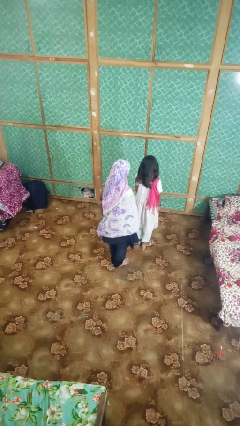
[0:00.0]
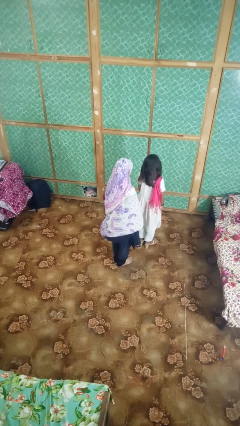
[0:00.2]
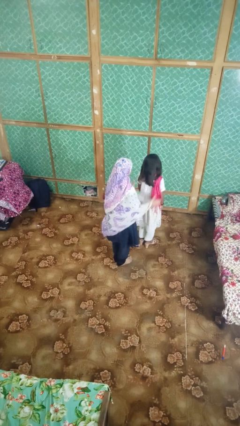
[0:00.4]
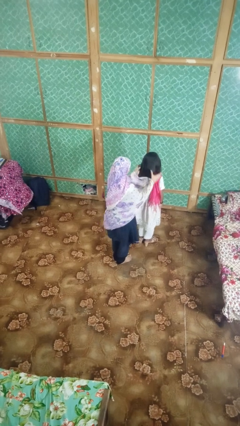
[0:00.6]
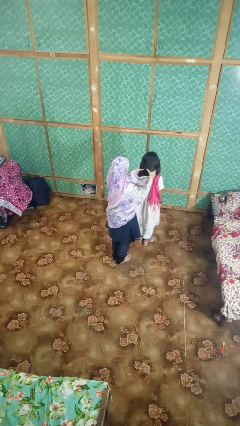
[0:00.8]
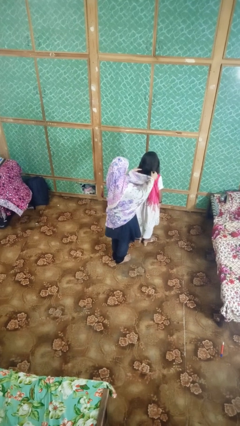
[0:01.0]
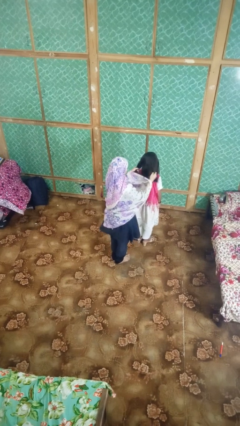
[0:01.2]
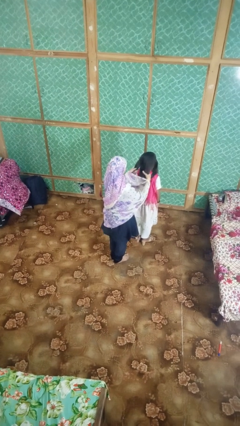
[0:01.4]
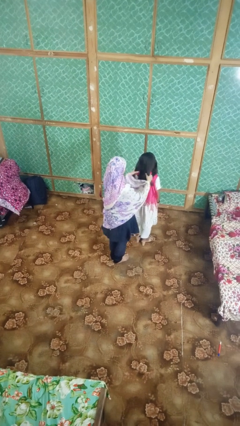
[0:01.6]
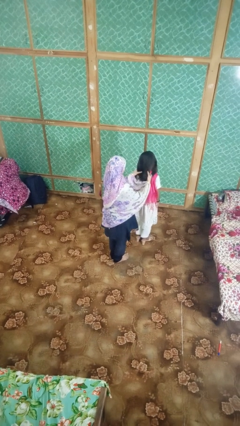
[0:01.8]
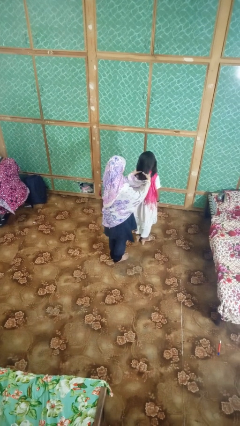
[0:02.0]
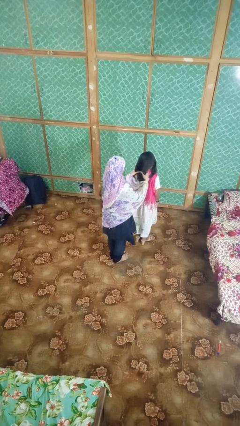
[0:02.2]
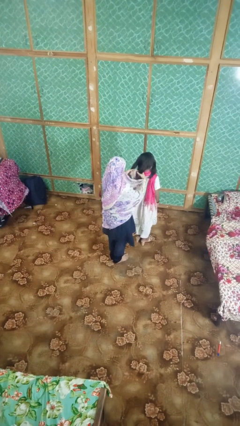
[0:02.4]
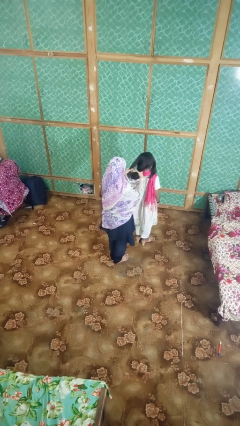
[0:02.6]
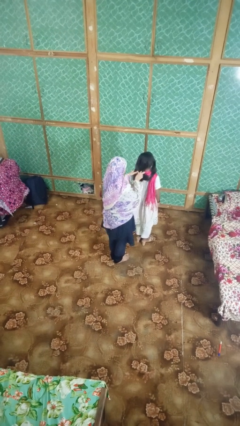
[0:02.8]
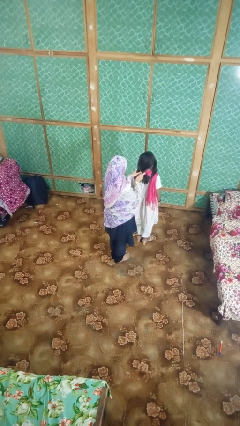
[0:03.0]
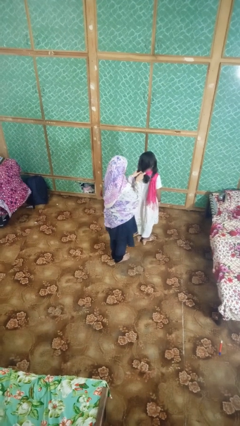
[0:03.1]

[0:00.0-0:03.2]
person braids hair of person

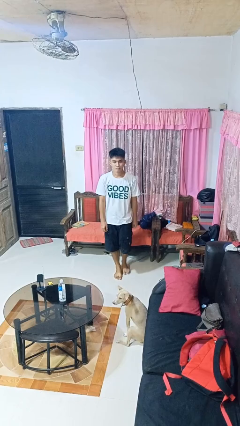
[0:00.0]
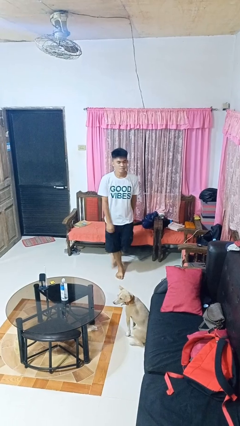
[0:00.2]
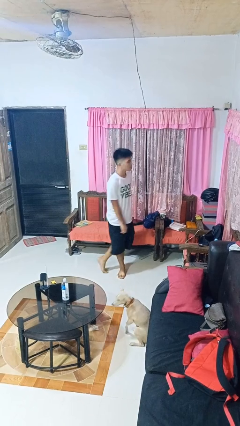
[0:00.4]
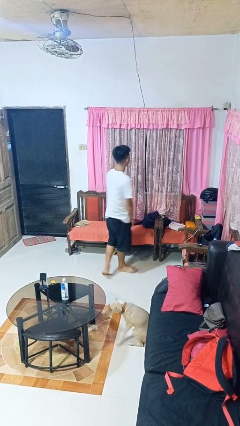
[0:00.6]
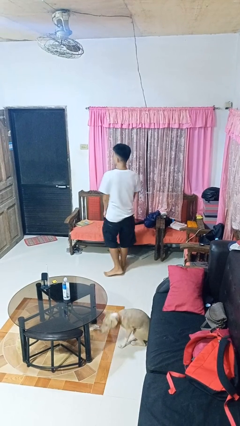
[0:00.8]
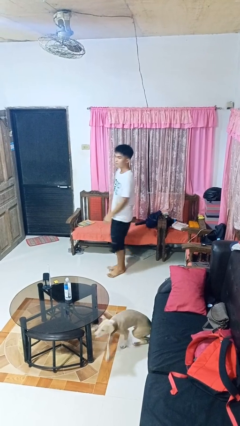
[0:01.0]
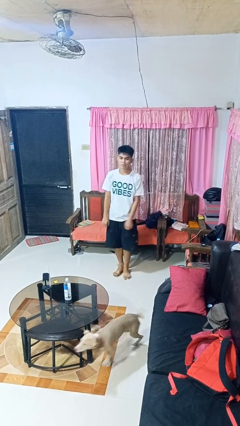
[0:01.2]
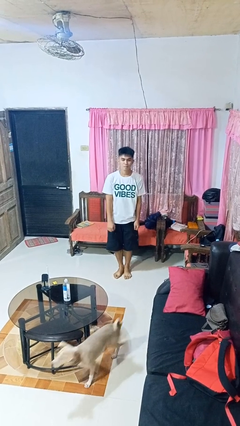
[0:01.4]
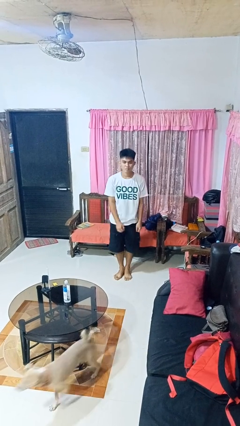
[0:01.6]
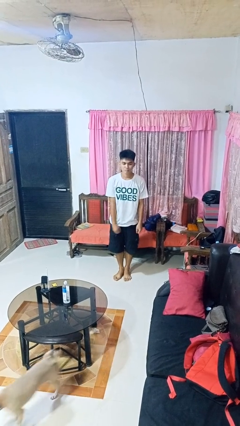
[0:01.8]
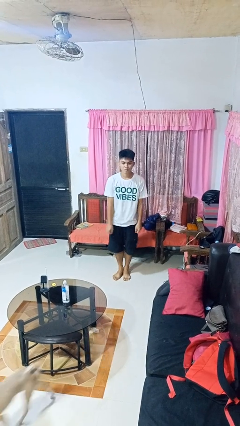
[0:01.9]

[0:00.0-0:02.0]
person twirls

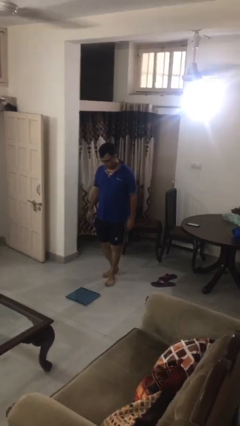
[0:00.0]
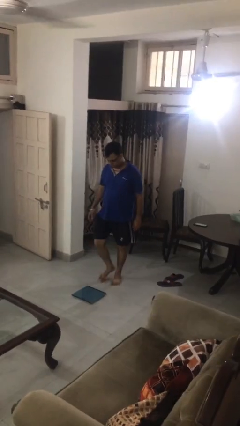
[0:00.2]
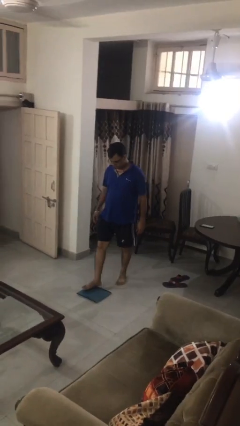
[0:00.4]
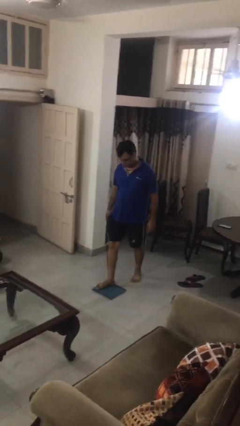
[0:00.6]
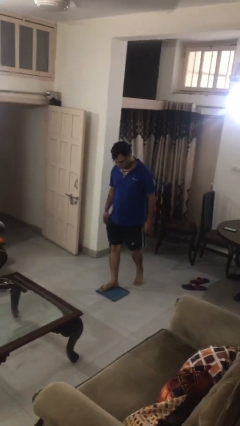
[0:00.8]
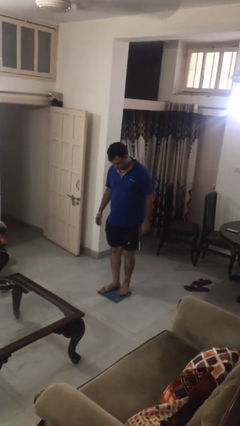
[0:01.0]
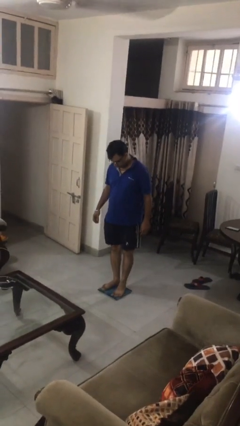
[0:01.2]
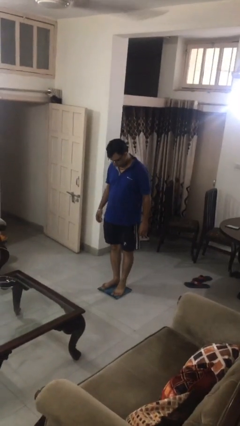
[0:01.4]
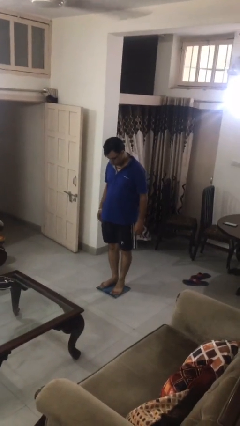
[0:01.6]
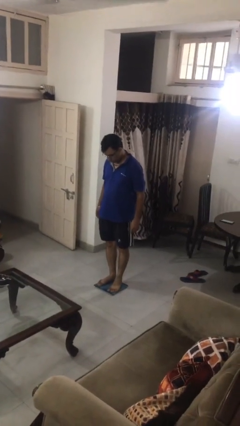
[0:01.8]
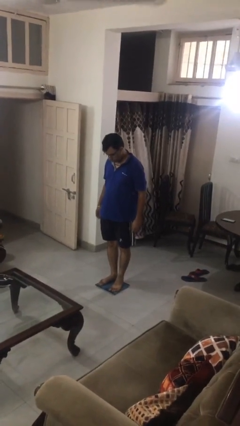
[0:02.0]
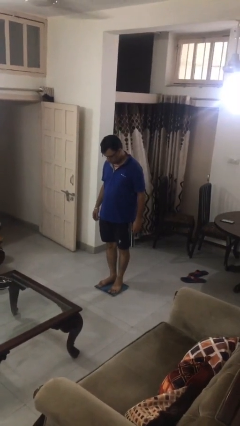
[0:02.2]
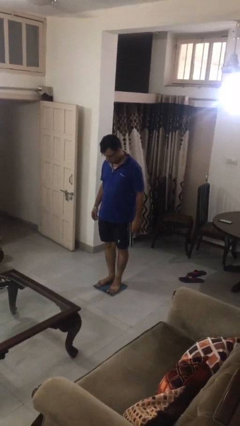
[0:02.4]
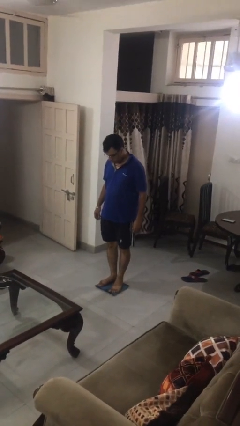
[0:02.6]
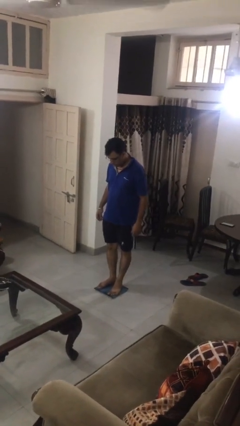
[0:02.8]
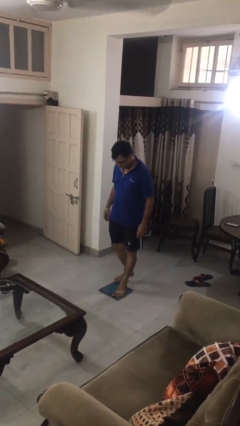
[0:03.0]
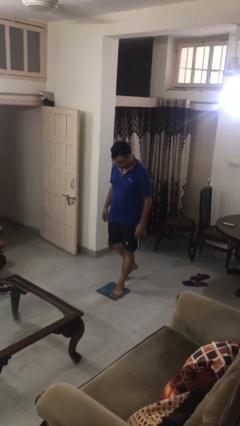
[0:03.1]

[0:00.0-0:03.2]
person uses bodyweight scale

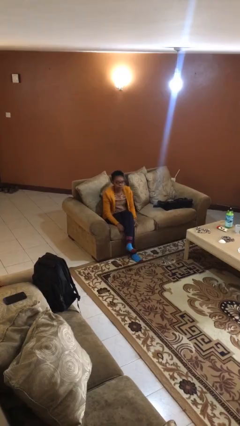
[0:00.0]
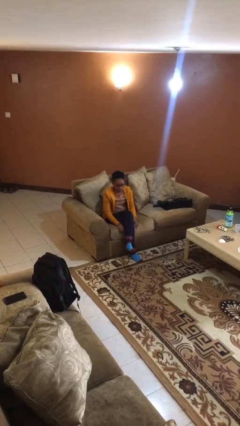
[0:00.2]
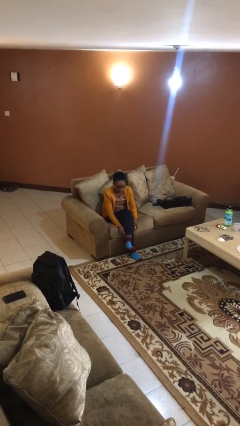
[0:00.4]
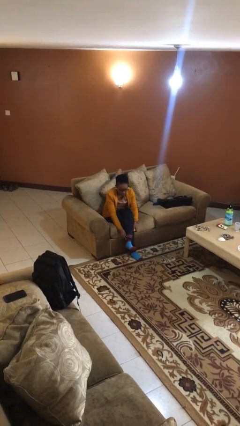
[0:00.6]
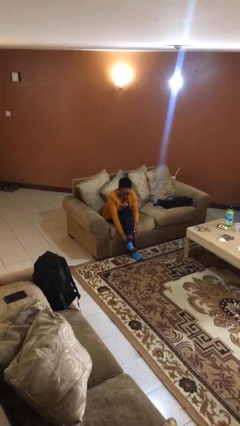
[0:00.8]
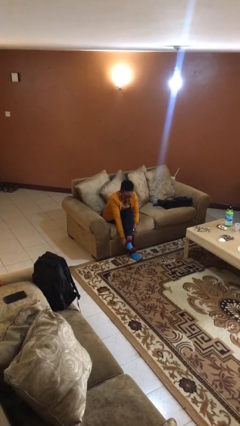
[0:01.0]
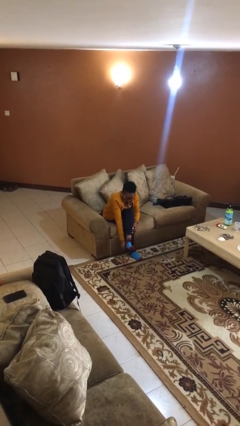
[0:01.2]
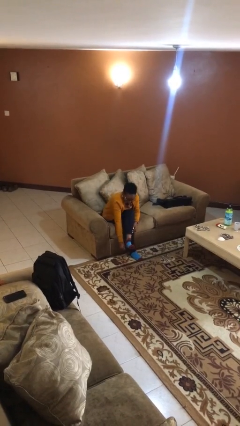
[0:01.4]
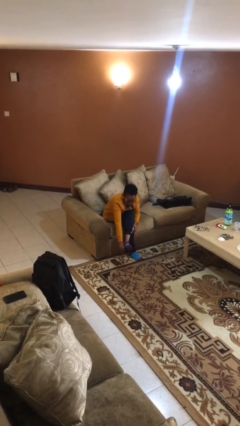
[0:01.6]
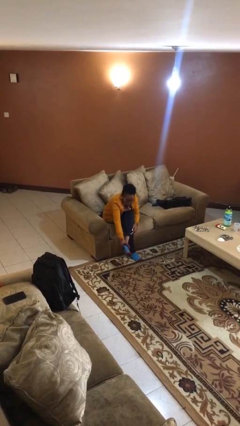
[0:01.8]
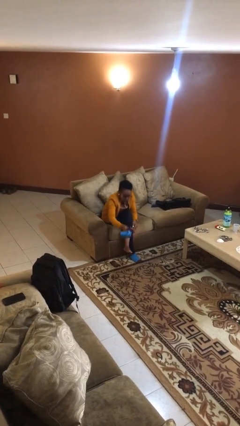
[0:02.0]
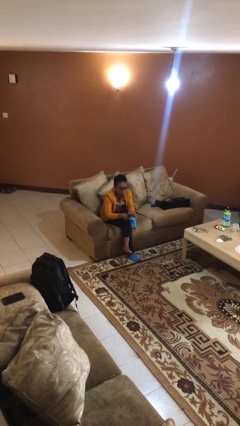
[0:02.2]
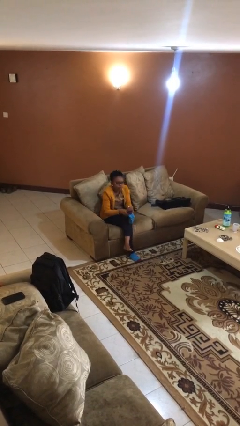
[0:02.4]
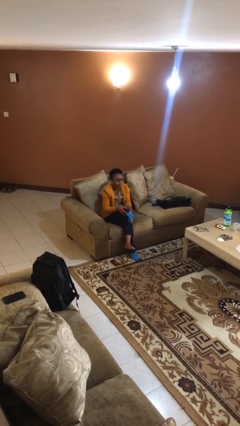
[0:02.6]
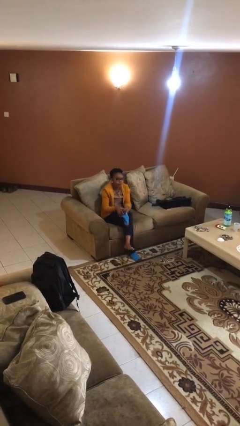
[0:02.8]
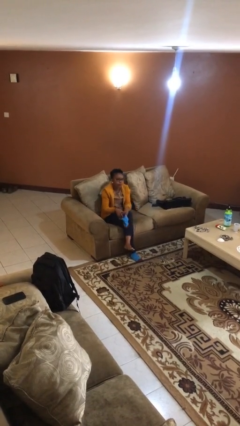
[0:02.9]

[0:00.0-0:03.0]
person takes off socks

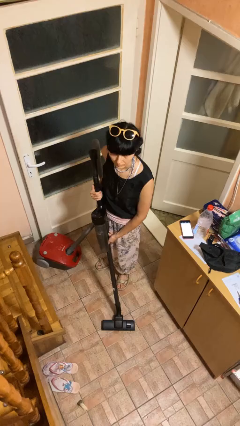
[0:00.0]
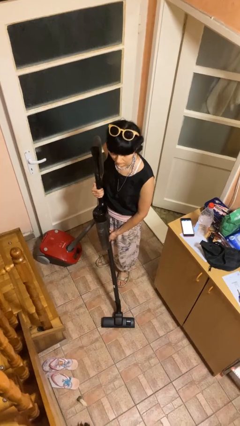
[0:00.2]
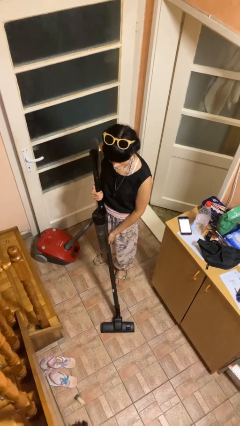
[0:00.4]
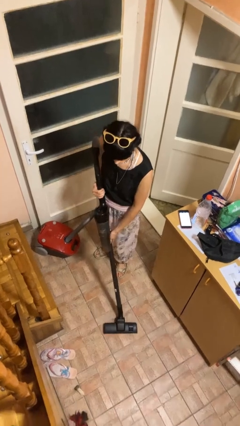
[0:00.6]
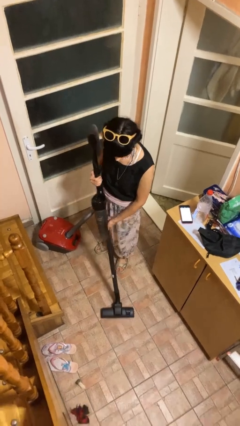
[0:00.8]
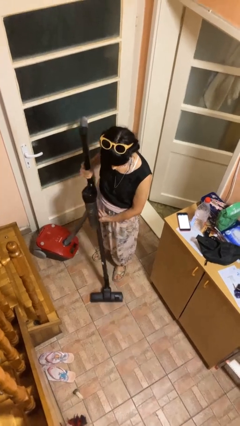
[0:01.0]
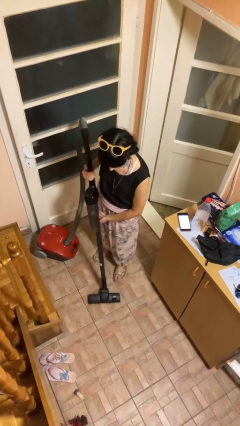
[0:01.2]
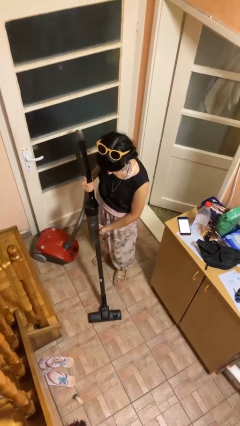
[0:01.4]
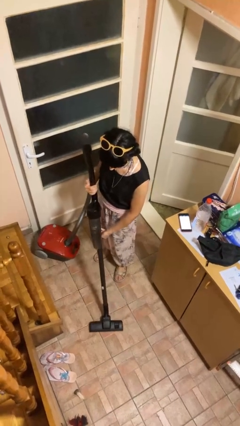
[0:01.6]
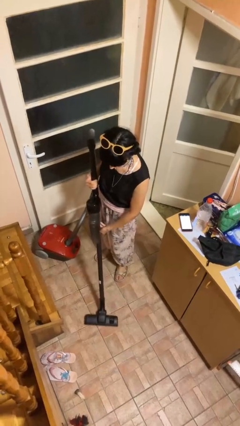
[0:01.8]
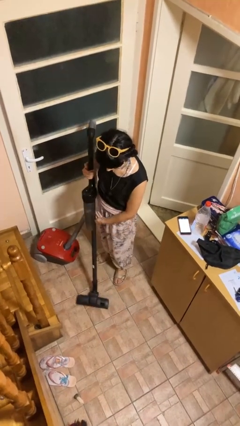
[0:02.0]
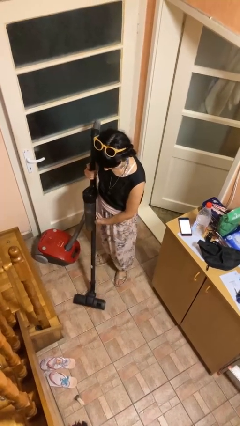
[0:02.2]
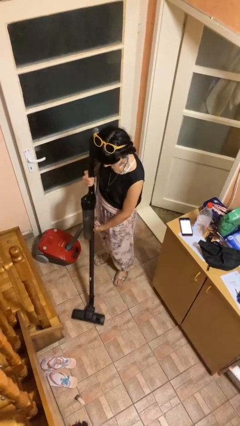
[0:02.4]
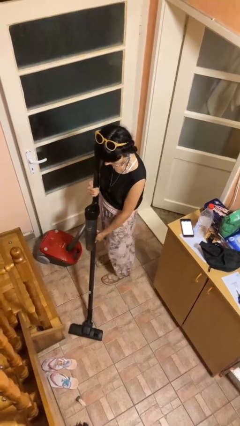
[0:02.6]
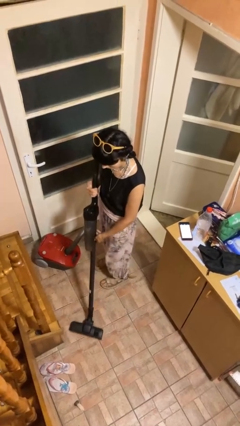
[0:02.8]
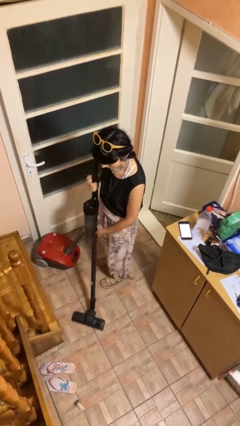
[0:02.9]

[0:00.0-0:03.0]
person vacuums carpet

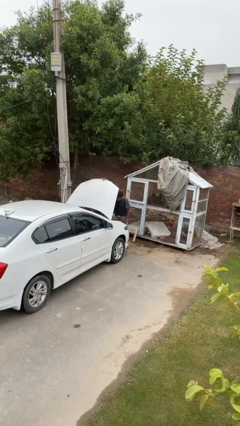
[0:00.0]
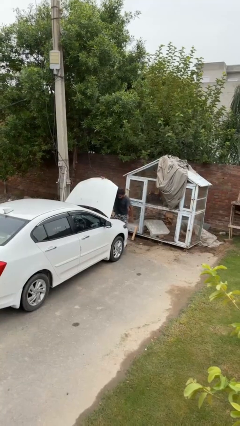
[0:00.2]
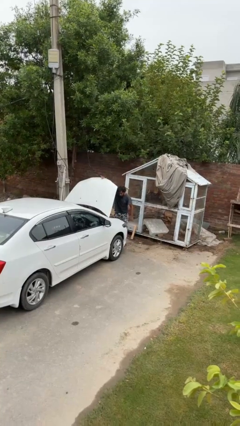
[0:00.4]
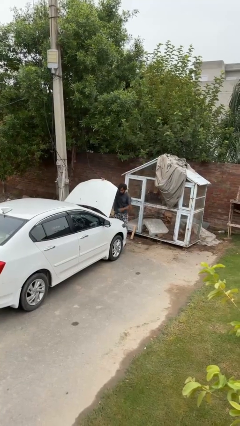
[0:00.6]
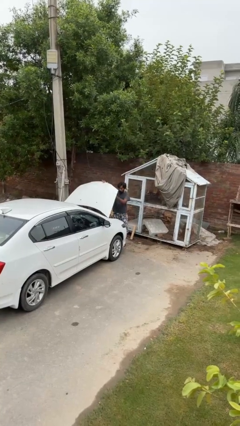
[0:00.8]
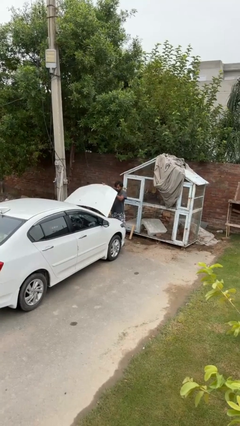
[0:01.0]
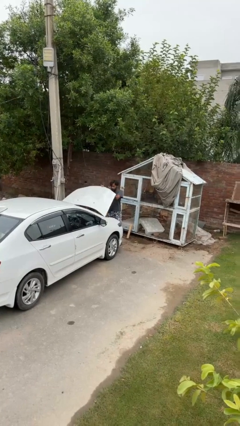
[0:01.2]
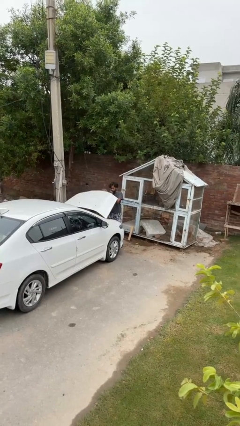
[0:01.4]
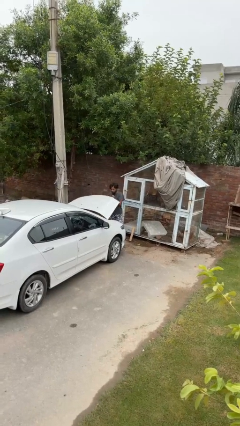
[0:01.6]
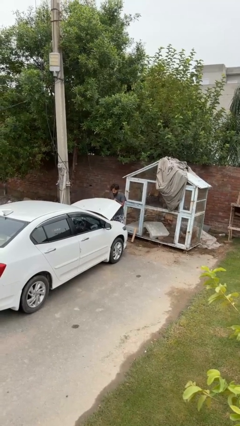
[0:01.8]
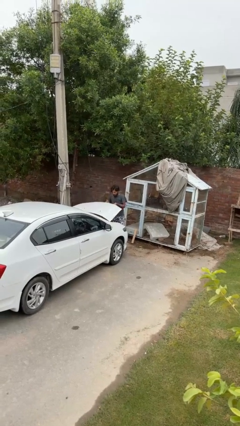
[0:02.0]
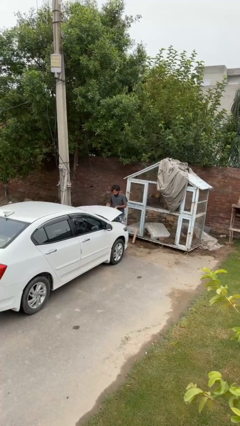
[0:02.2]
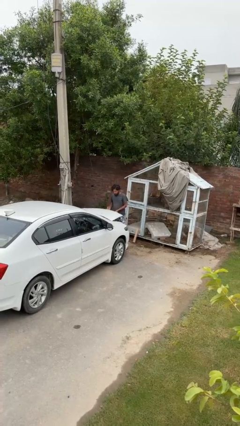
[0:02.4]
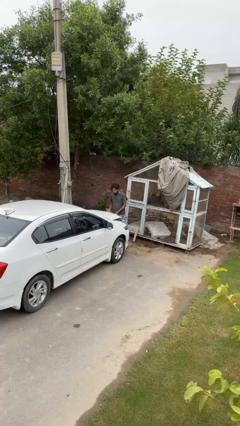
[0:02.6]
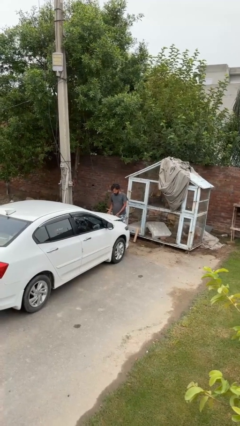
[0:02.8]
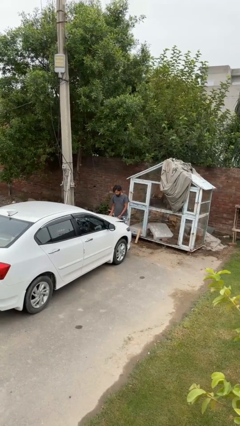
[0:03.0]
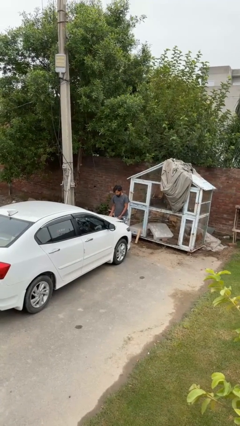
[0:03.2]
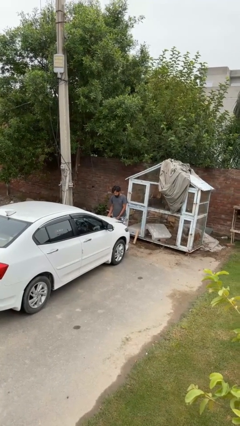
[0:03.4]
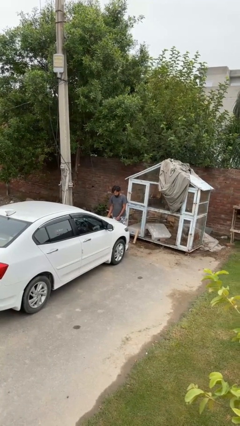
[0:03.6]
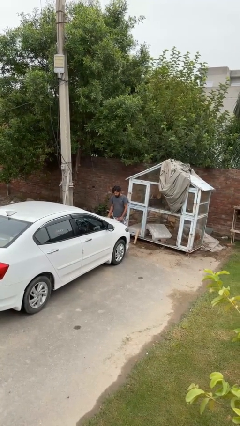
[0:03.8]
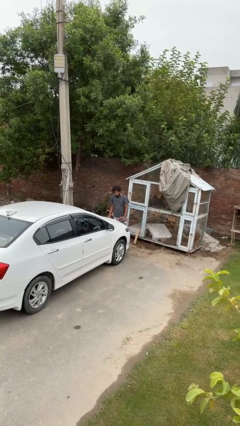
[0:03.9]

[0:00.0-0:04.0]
person closes car hood
